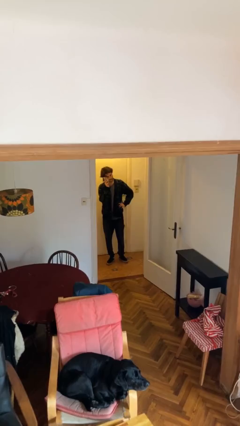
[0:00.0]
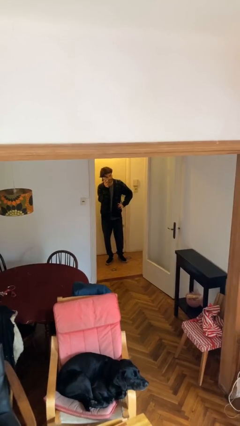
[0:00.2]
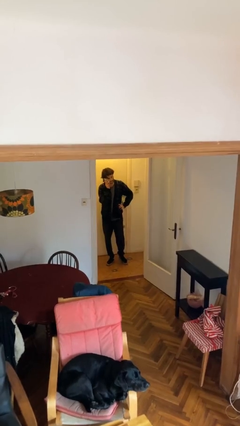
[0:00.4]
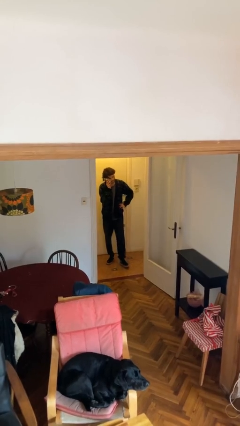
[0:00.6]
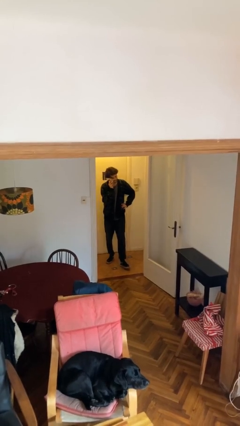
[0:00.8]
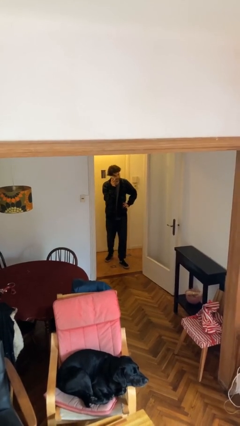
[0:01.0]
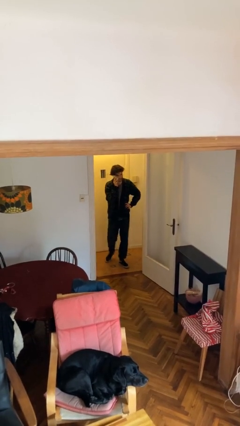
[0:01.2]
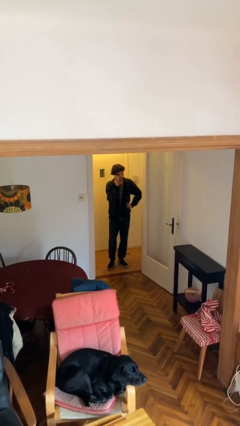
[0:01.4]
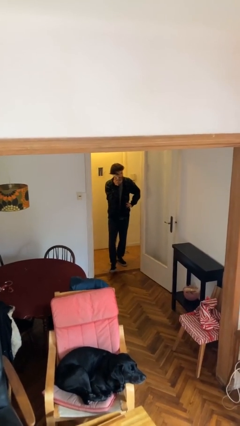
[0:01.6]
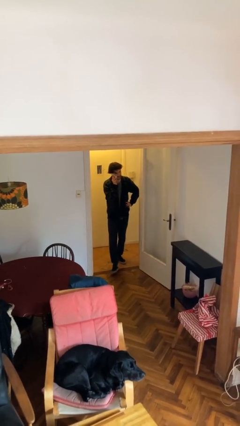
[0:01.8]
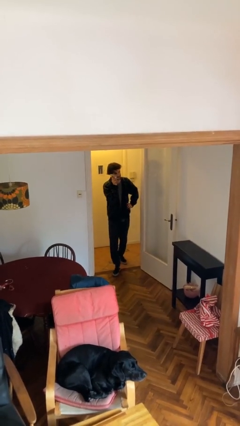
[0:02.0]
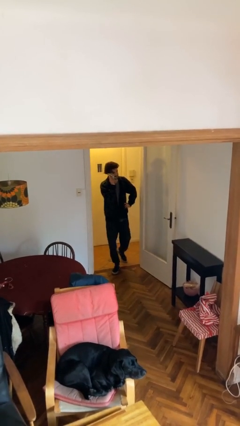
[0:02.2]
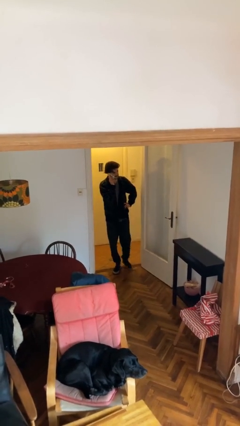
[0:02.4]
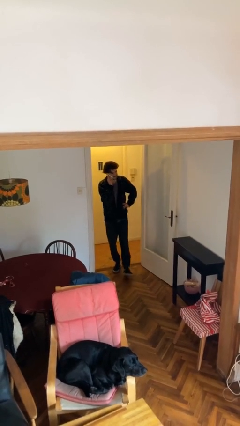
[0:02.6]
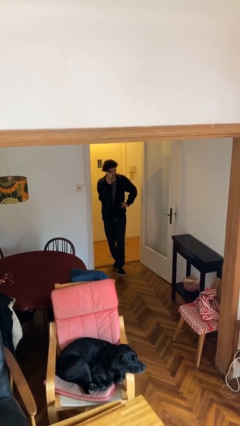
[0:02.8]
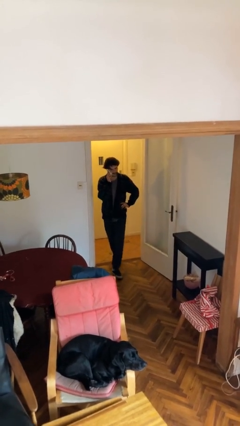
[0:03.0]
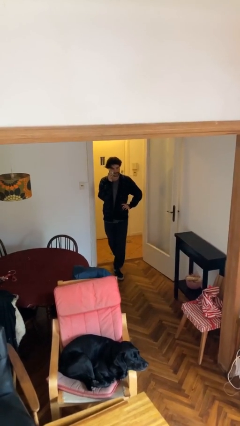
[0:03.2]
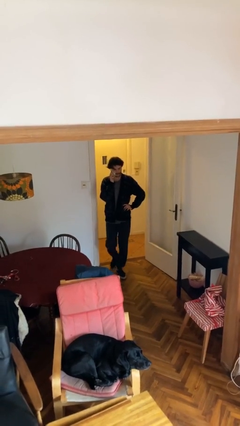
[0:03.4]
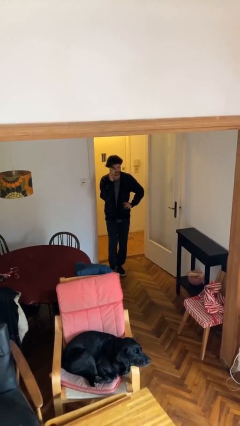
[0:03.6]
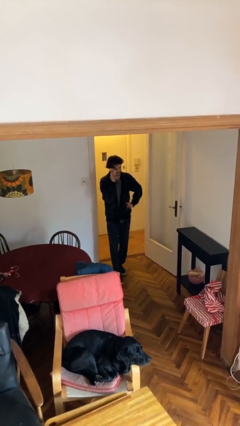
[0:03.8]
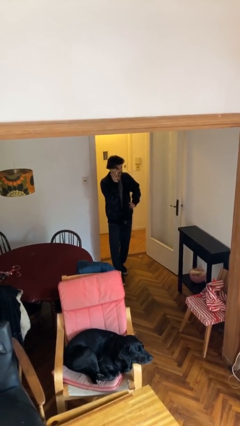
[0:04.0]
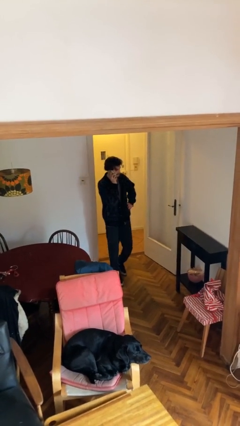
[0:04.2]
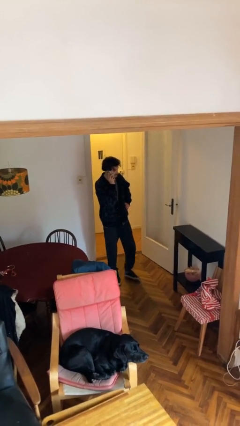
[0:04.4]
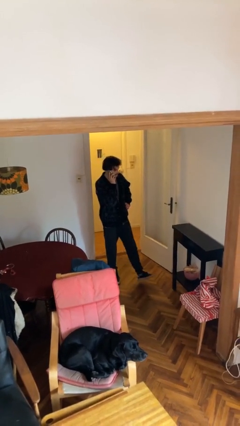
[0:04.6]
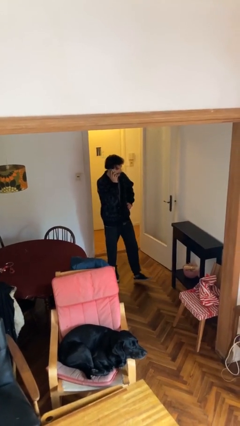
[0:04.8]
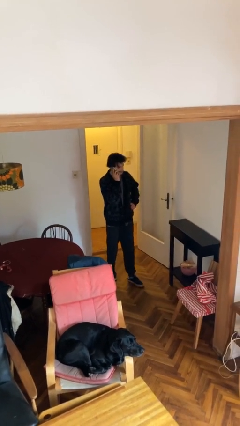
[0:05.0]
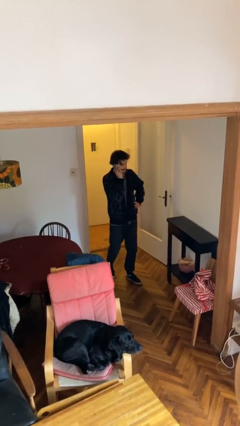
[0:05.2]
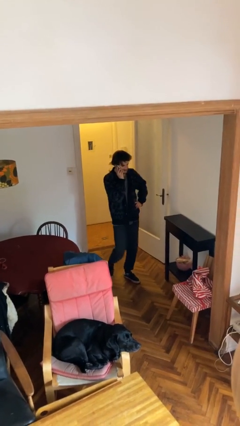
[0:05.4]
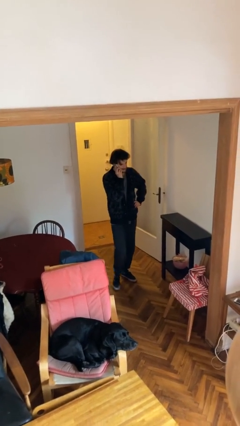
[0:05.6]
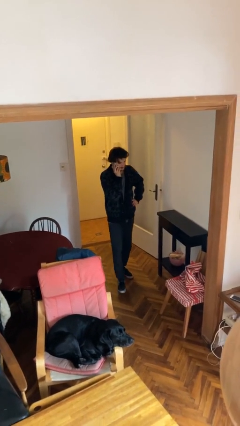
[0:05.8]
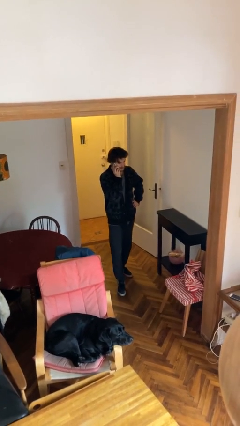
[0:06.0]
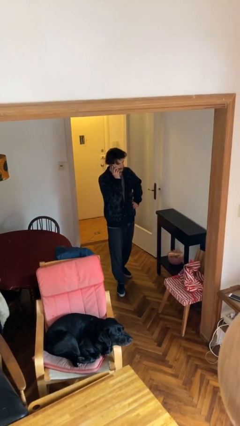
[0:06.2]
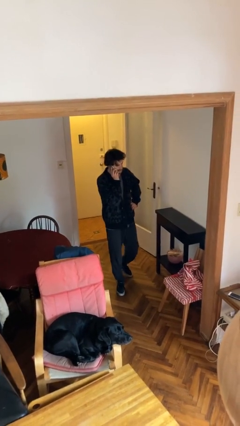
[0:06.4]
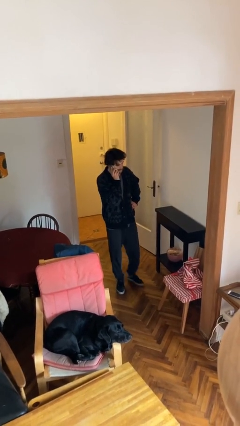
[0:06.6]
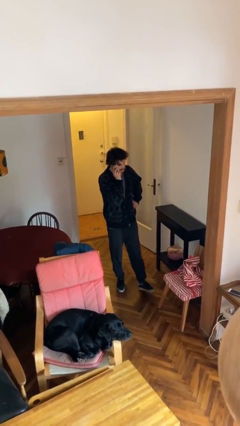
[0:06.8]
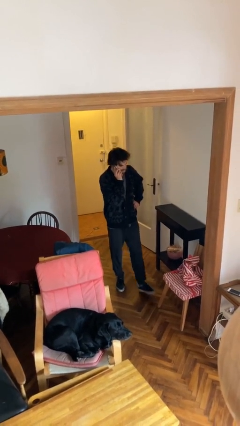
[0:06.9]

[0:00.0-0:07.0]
person enters scene through structure

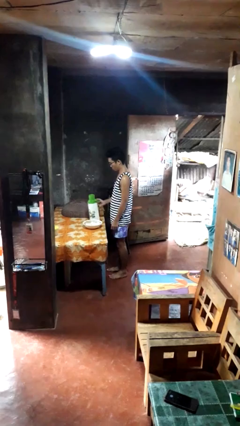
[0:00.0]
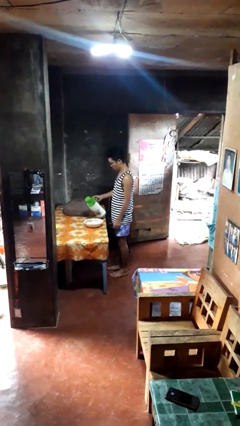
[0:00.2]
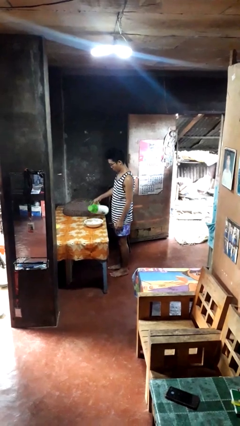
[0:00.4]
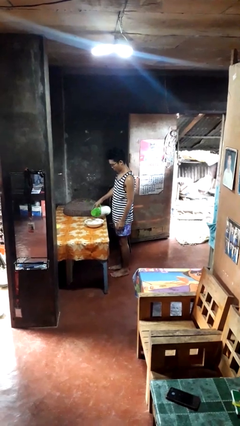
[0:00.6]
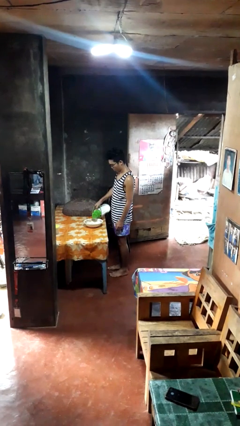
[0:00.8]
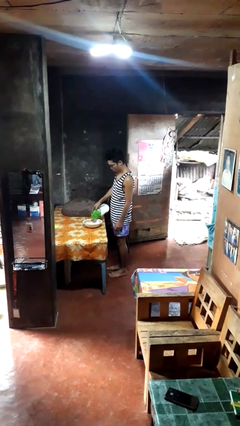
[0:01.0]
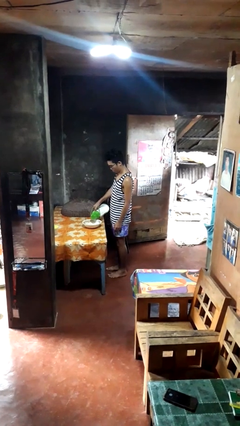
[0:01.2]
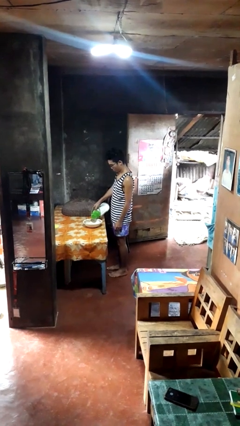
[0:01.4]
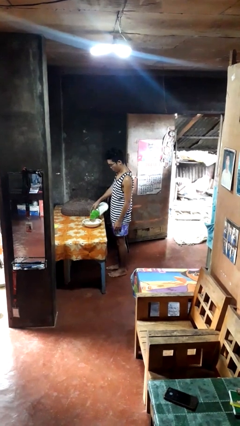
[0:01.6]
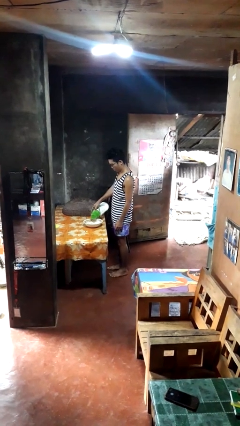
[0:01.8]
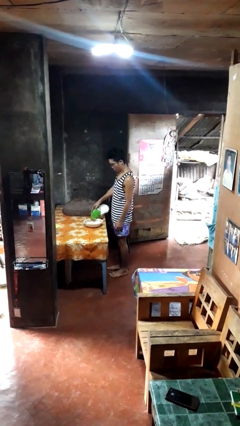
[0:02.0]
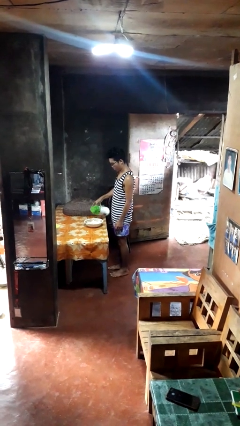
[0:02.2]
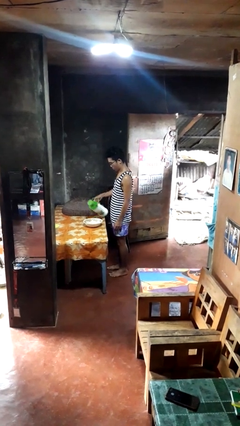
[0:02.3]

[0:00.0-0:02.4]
person pours into bowl

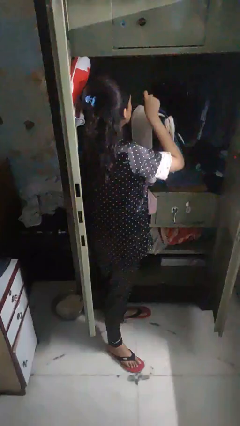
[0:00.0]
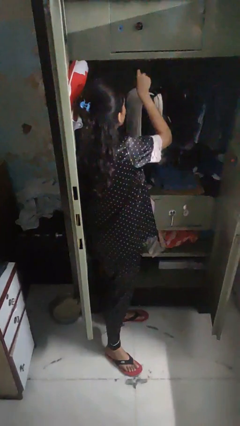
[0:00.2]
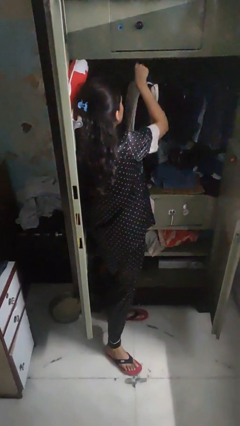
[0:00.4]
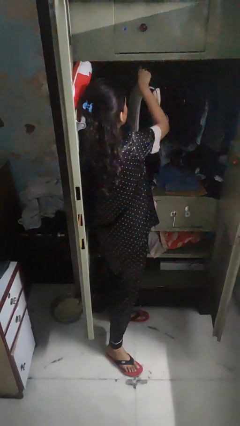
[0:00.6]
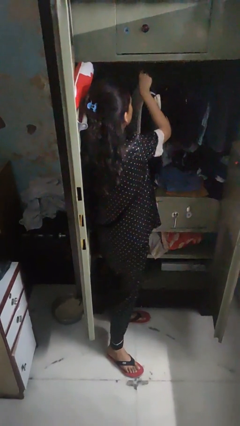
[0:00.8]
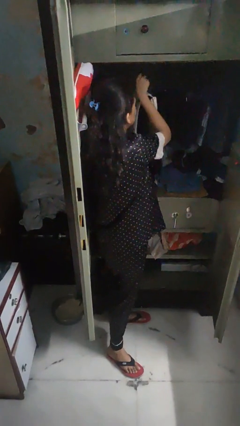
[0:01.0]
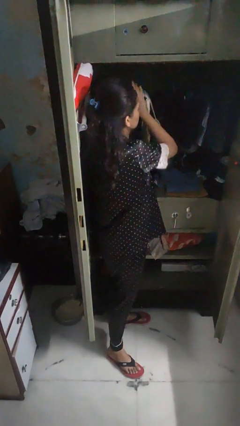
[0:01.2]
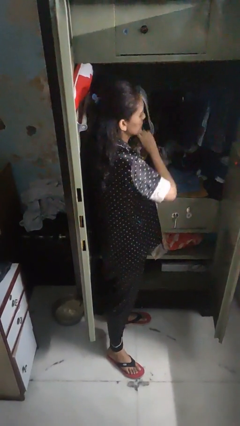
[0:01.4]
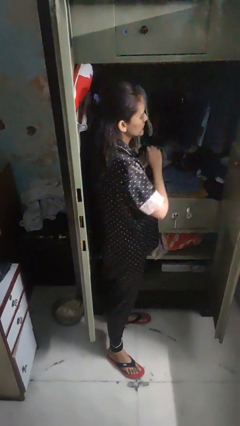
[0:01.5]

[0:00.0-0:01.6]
person puts clothes into closet

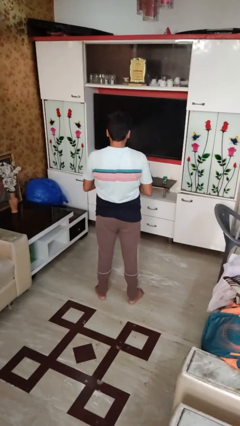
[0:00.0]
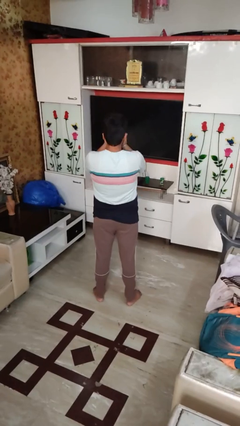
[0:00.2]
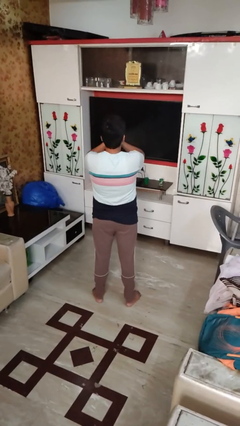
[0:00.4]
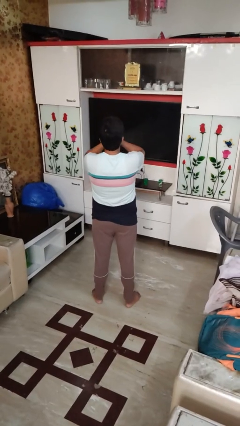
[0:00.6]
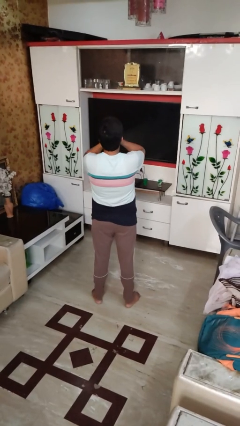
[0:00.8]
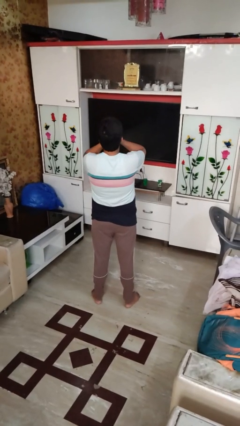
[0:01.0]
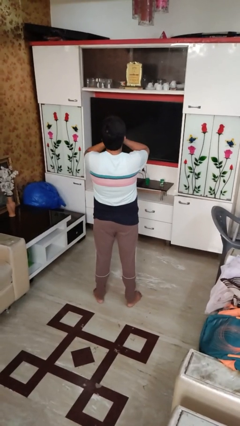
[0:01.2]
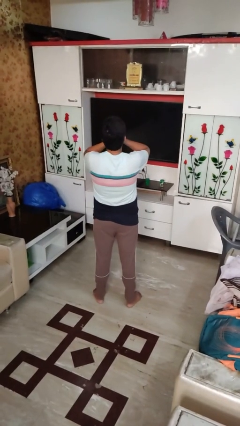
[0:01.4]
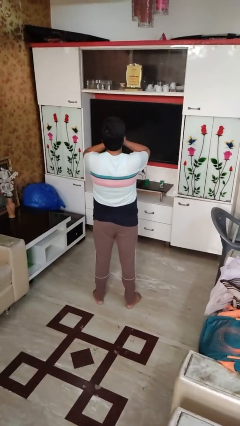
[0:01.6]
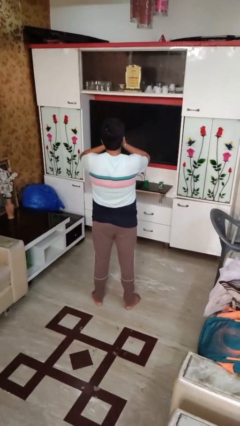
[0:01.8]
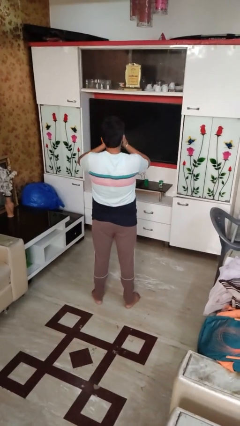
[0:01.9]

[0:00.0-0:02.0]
person covers face with hands

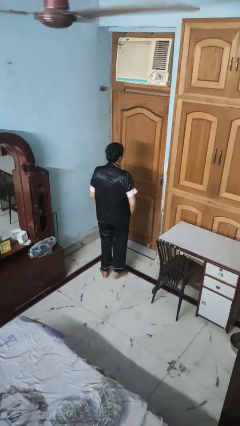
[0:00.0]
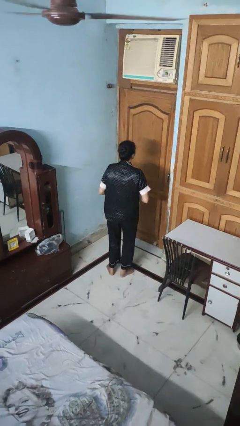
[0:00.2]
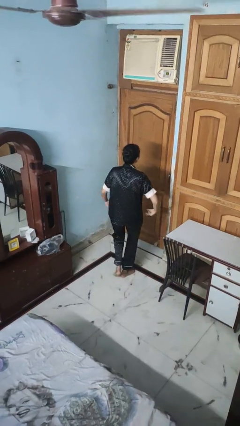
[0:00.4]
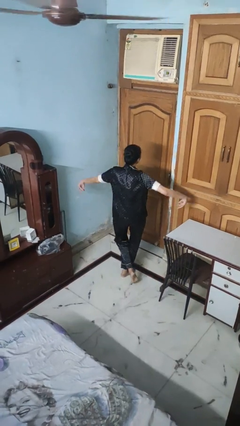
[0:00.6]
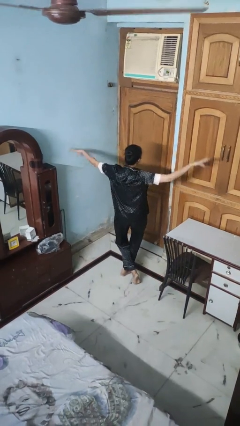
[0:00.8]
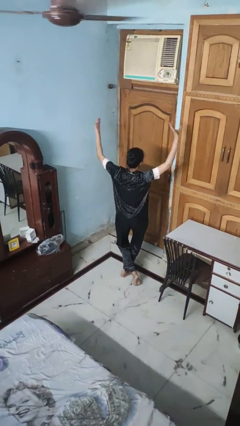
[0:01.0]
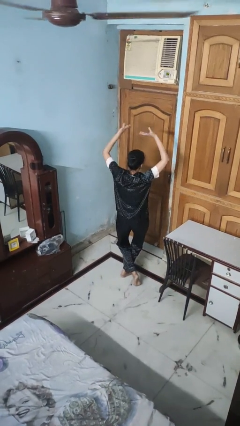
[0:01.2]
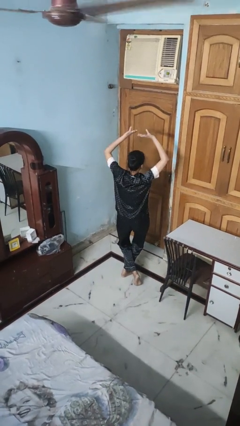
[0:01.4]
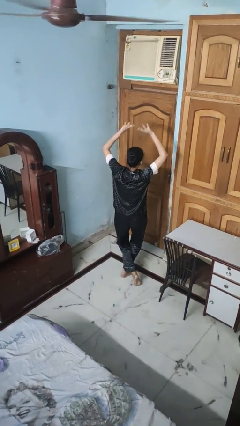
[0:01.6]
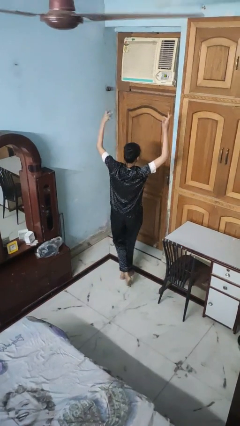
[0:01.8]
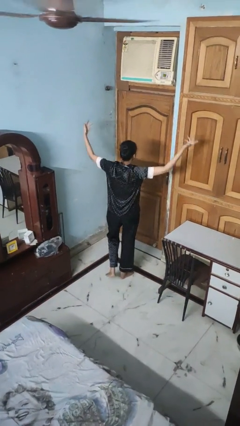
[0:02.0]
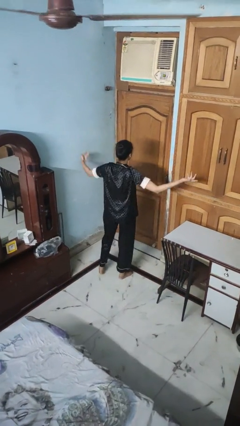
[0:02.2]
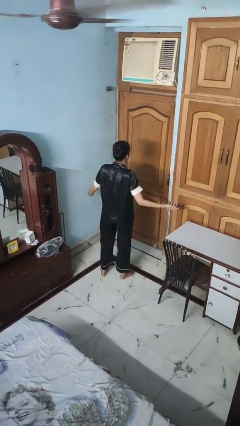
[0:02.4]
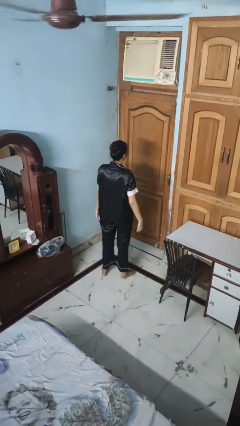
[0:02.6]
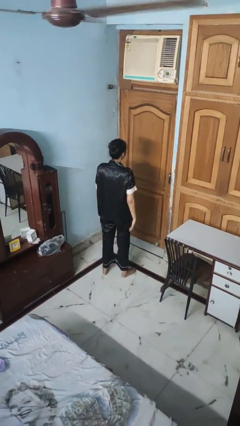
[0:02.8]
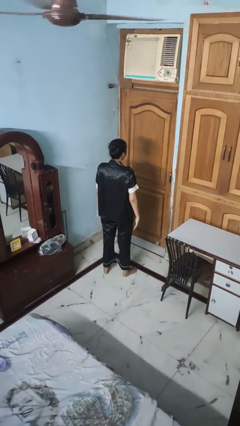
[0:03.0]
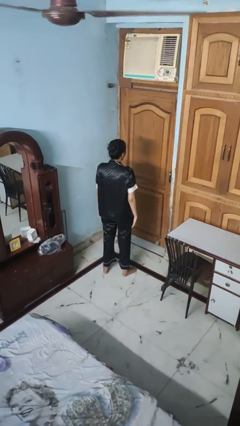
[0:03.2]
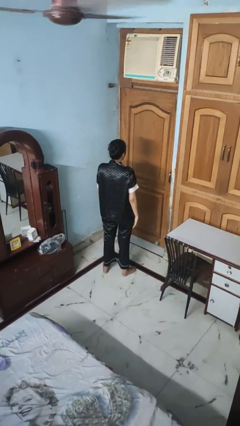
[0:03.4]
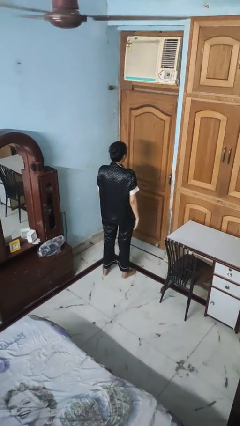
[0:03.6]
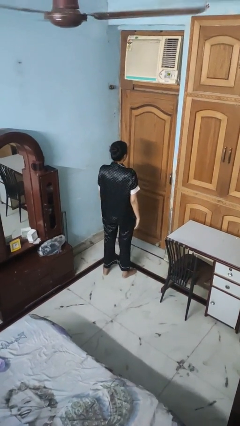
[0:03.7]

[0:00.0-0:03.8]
person dances in place

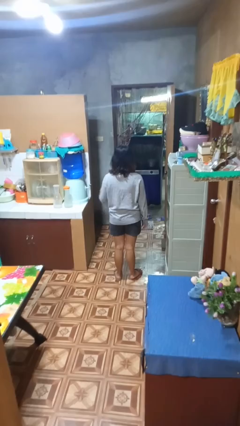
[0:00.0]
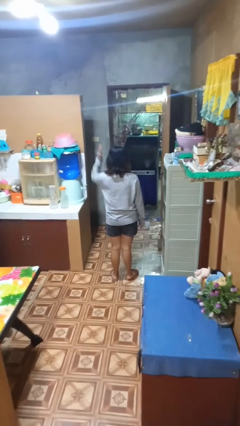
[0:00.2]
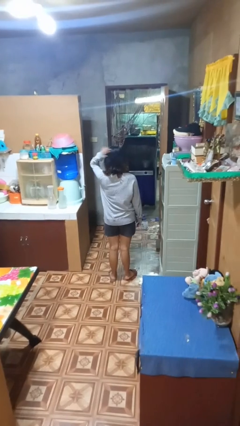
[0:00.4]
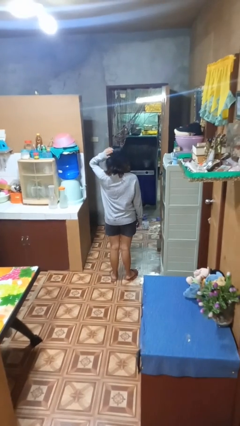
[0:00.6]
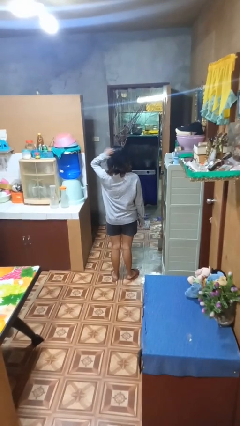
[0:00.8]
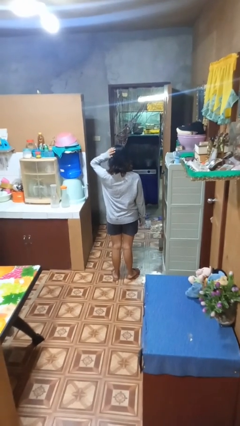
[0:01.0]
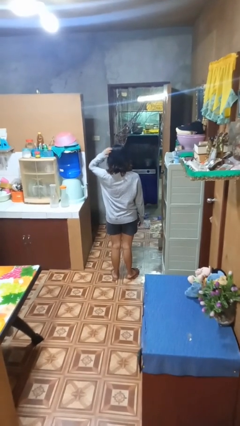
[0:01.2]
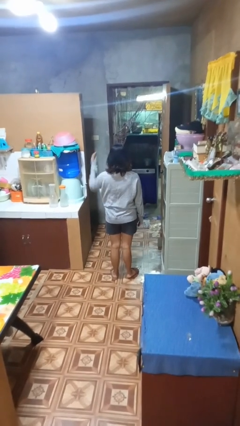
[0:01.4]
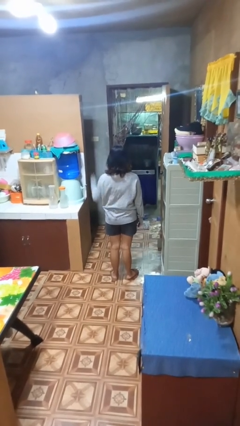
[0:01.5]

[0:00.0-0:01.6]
person pats head
